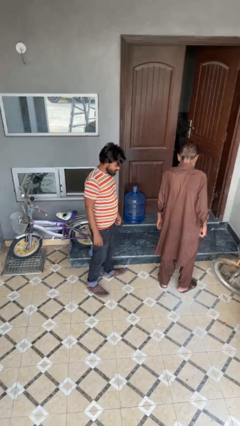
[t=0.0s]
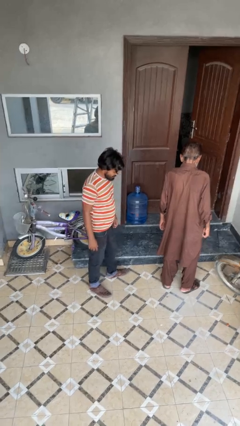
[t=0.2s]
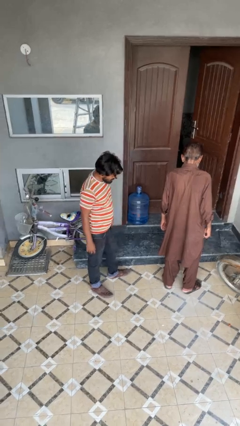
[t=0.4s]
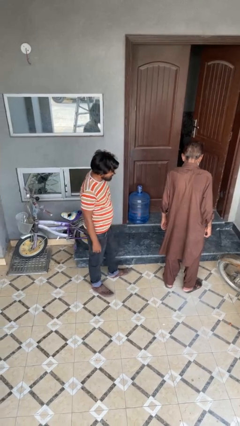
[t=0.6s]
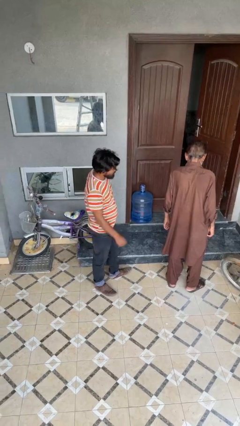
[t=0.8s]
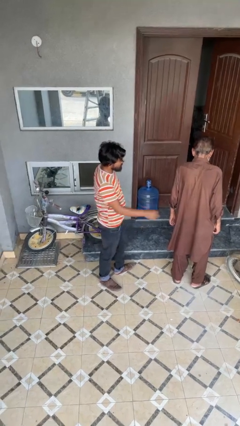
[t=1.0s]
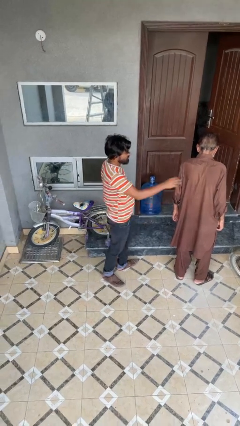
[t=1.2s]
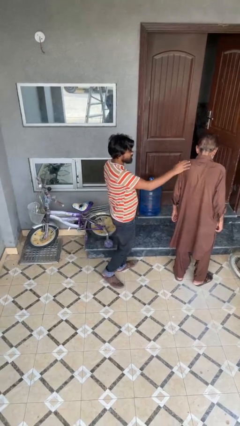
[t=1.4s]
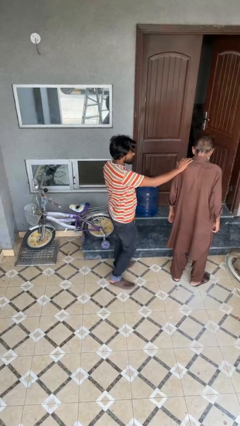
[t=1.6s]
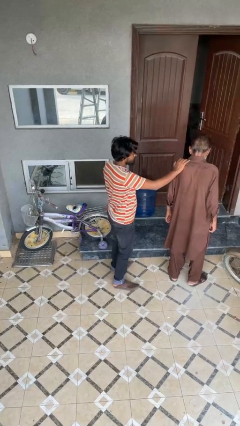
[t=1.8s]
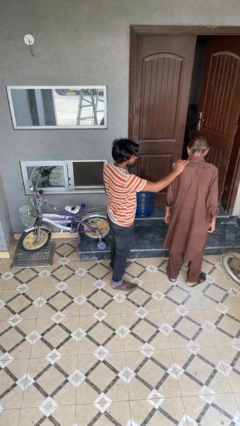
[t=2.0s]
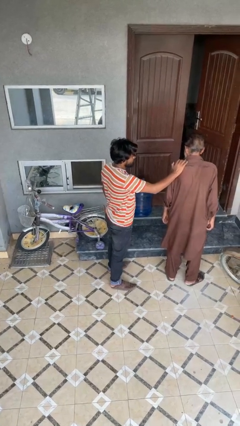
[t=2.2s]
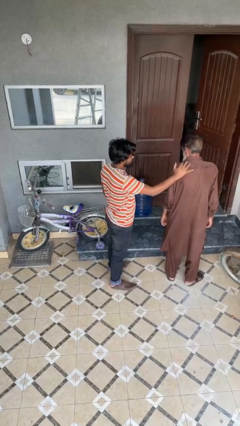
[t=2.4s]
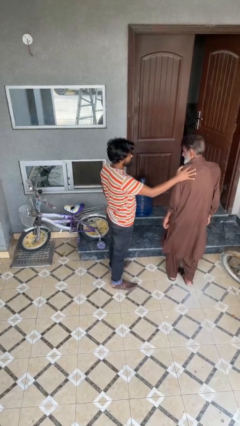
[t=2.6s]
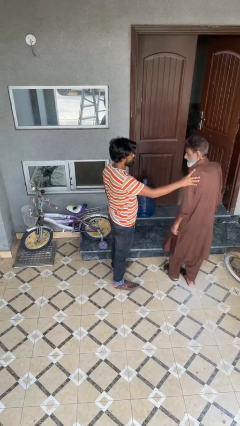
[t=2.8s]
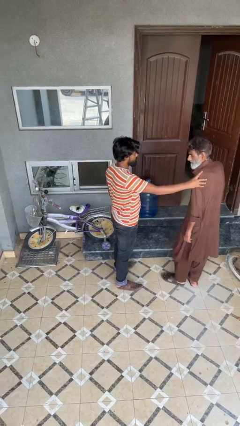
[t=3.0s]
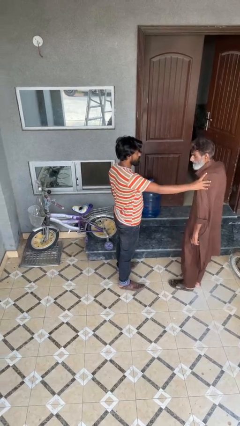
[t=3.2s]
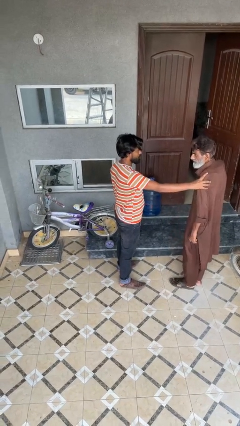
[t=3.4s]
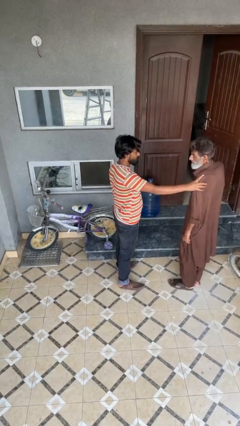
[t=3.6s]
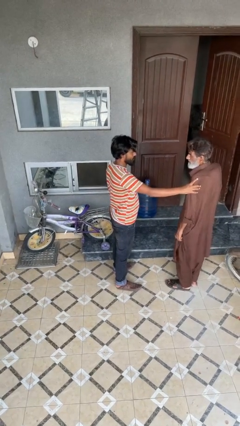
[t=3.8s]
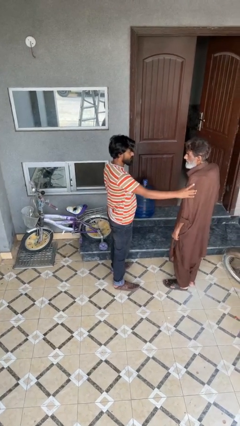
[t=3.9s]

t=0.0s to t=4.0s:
person touches back of person

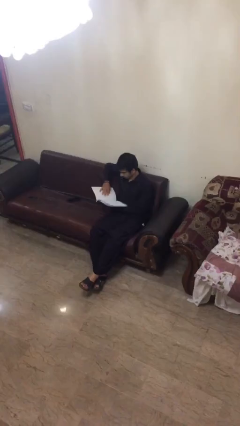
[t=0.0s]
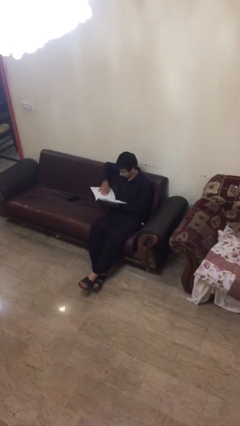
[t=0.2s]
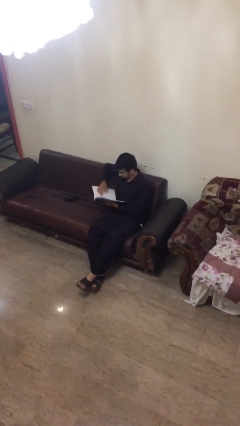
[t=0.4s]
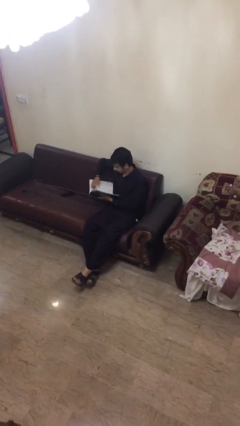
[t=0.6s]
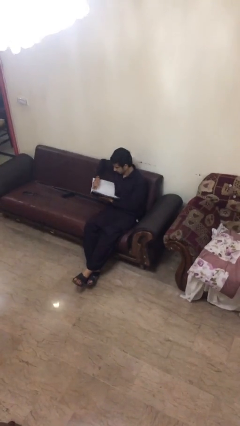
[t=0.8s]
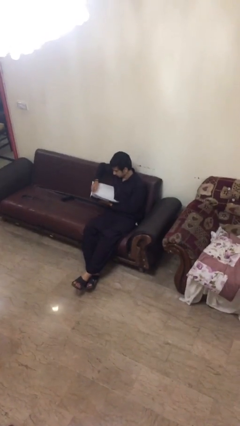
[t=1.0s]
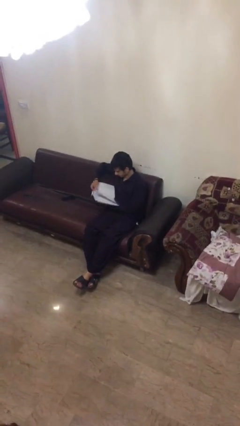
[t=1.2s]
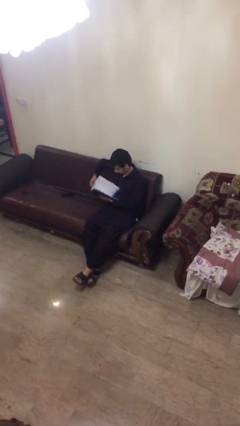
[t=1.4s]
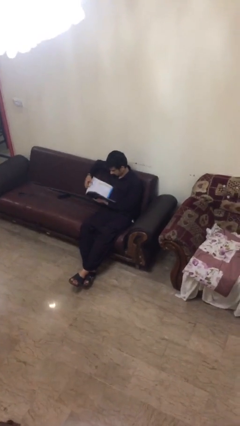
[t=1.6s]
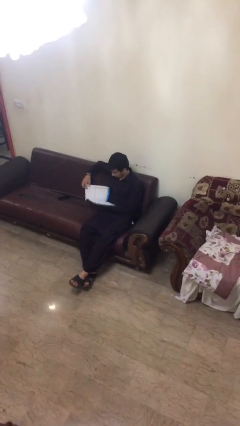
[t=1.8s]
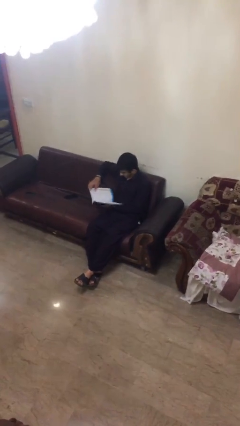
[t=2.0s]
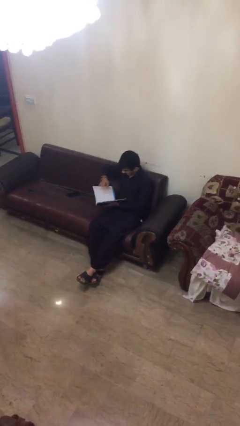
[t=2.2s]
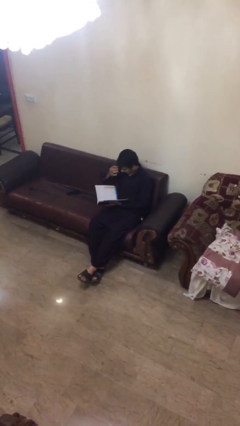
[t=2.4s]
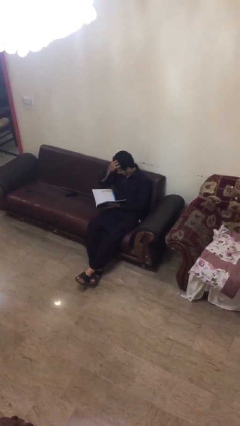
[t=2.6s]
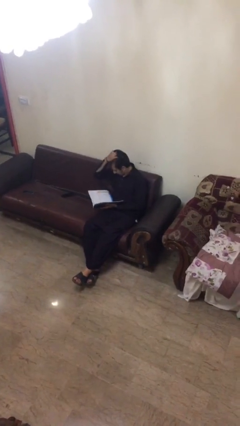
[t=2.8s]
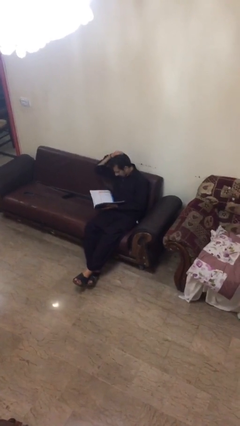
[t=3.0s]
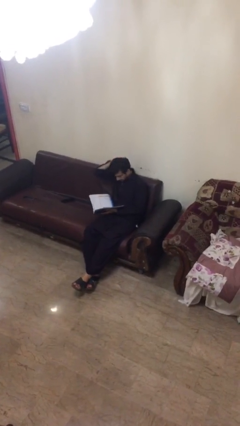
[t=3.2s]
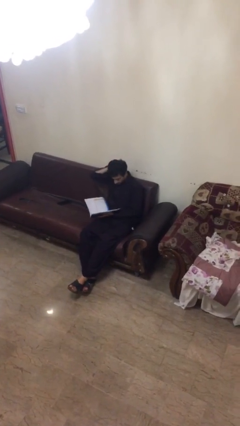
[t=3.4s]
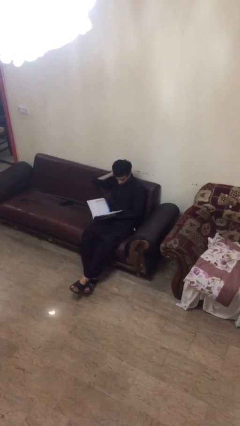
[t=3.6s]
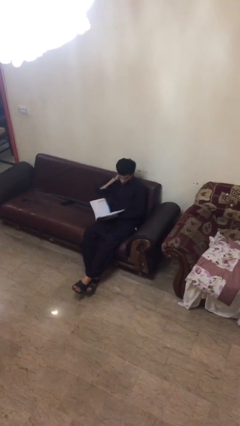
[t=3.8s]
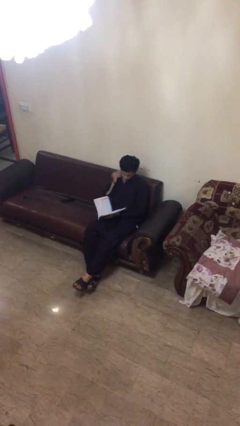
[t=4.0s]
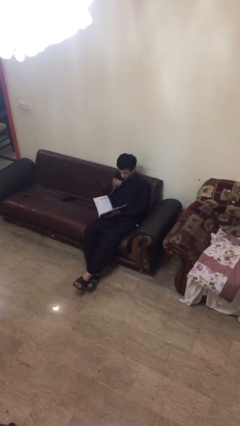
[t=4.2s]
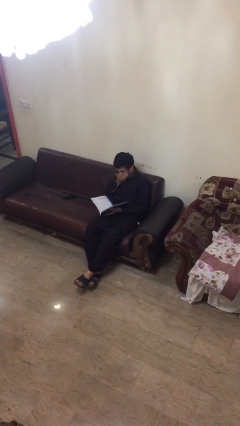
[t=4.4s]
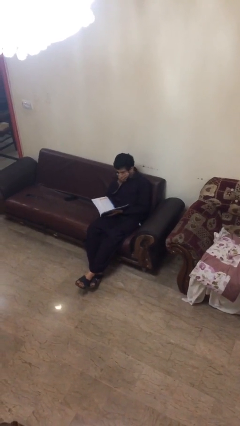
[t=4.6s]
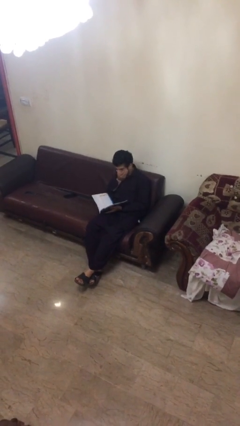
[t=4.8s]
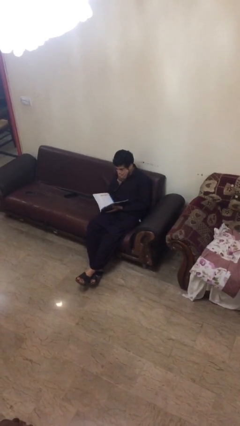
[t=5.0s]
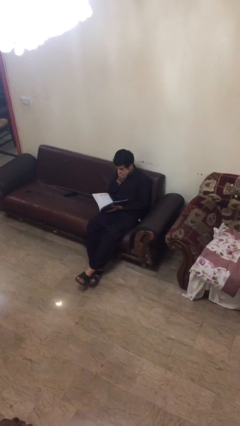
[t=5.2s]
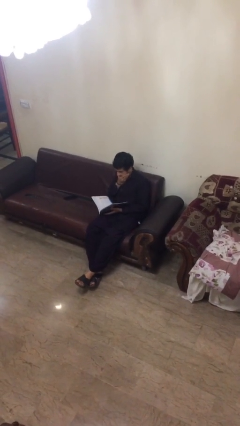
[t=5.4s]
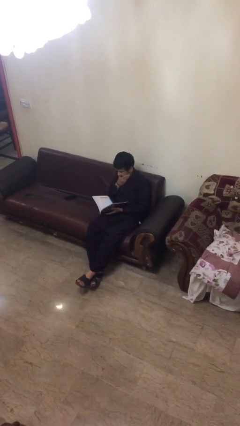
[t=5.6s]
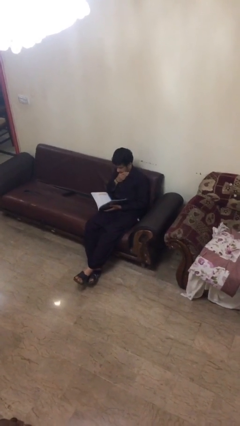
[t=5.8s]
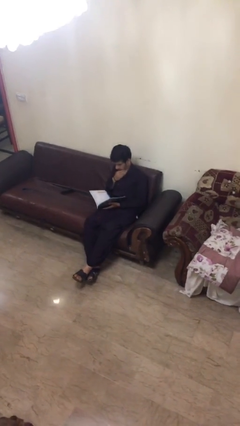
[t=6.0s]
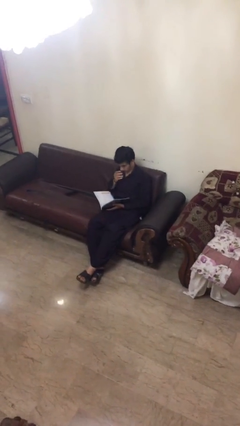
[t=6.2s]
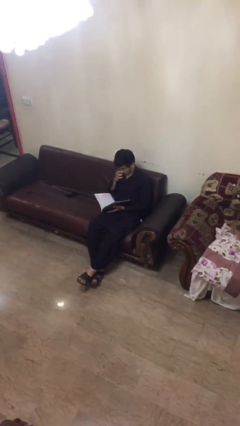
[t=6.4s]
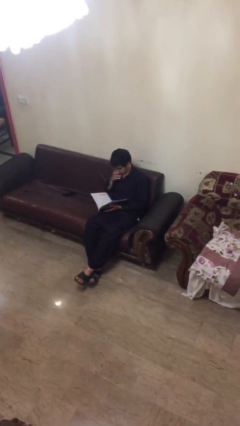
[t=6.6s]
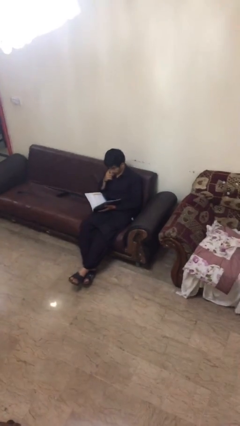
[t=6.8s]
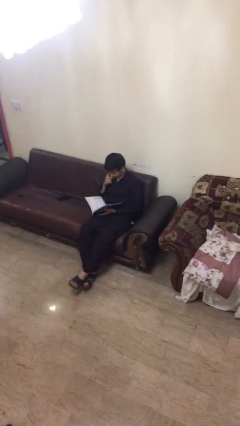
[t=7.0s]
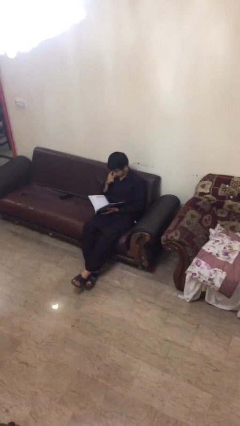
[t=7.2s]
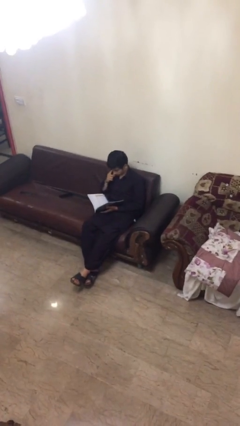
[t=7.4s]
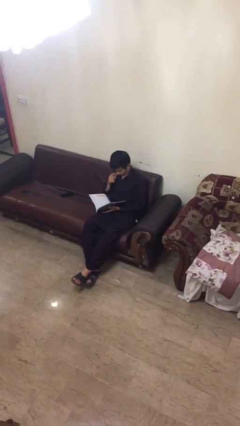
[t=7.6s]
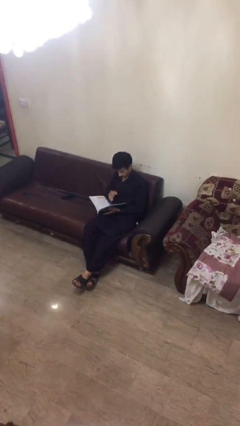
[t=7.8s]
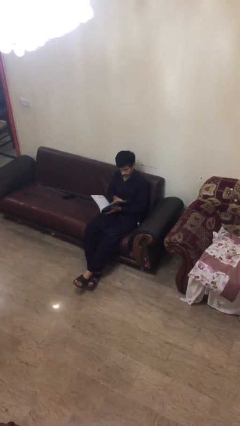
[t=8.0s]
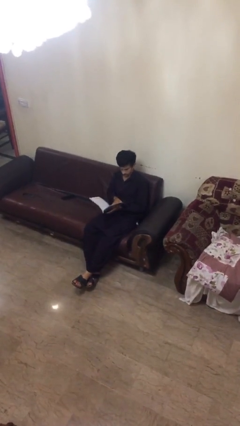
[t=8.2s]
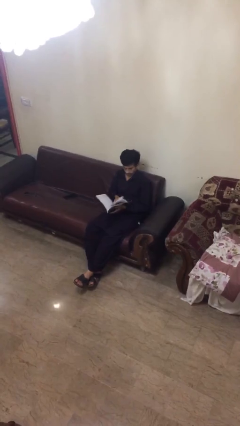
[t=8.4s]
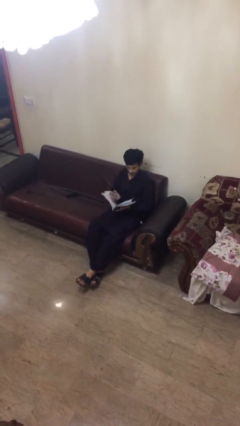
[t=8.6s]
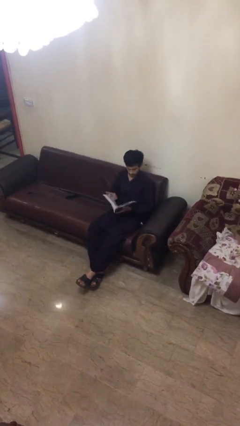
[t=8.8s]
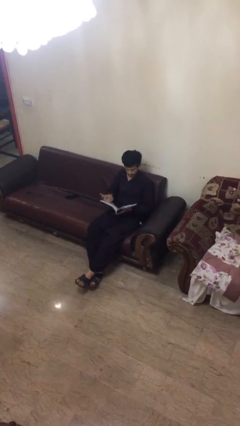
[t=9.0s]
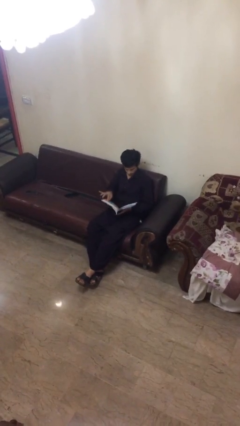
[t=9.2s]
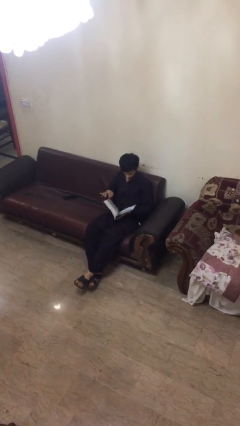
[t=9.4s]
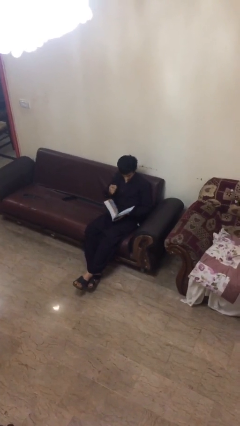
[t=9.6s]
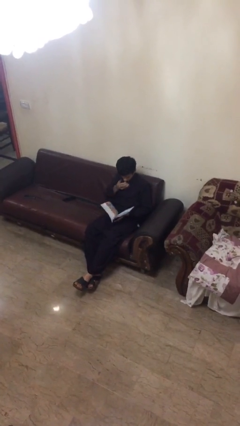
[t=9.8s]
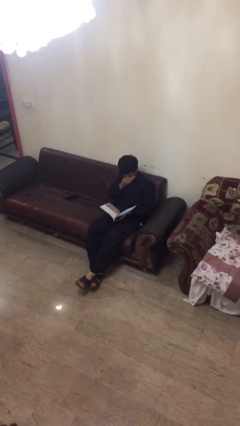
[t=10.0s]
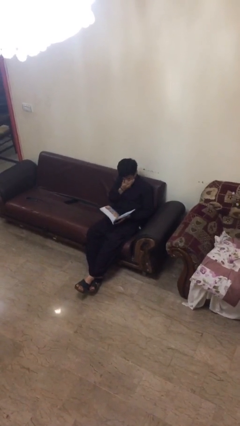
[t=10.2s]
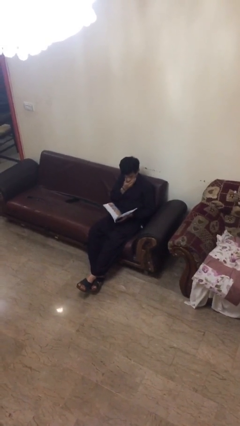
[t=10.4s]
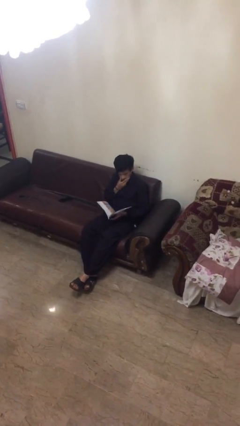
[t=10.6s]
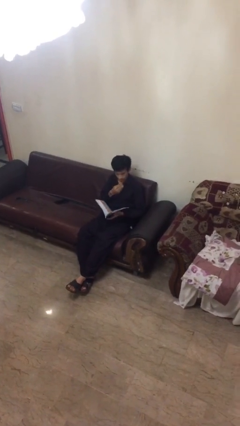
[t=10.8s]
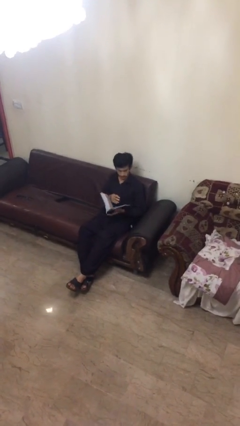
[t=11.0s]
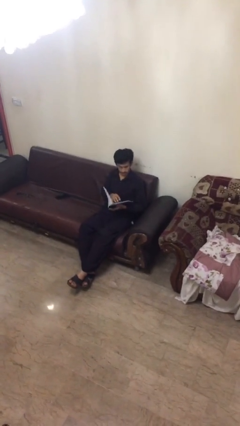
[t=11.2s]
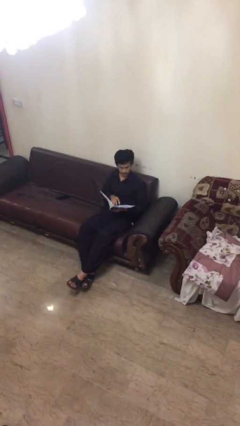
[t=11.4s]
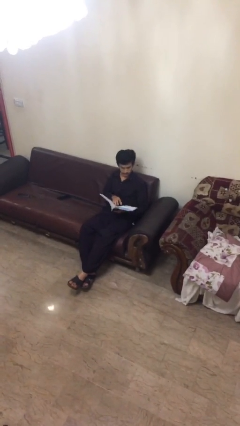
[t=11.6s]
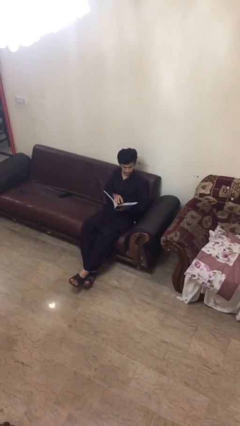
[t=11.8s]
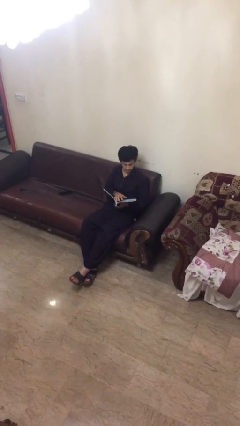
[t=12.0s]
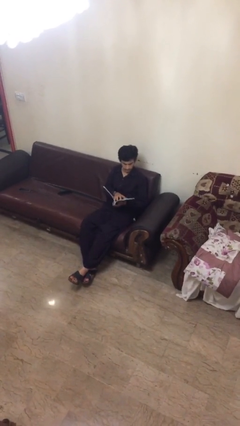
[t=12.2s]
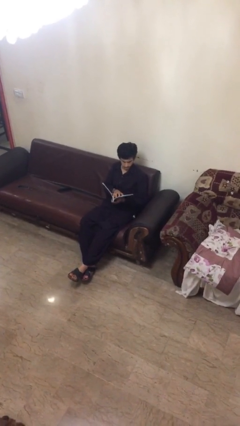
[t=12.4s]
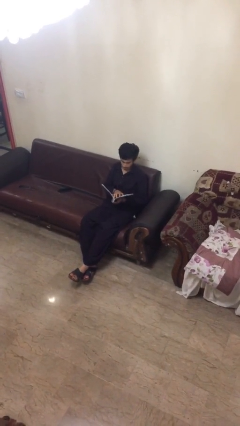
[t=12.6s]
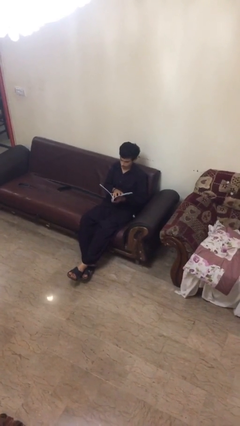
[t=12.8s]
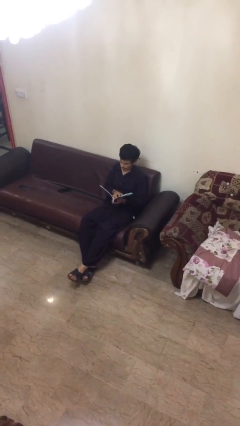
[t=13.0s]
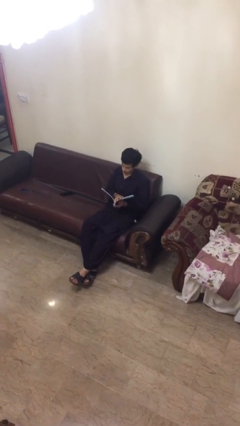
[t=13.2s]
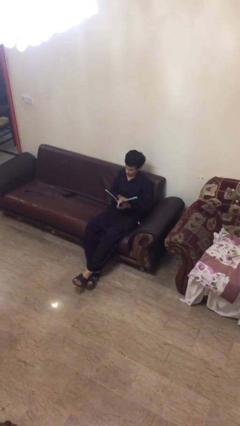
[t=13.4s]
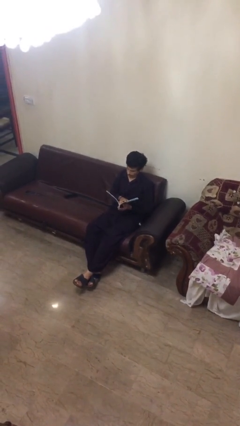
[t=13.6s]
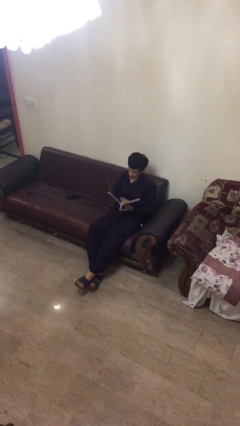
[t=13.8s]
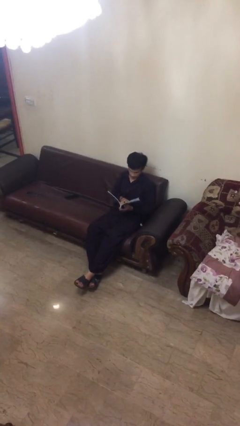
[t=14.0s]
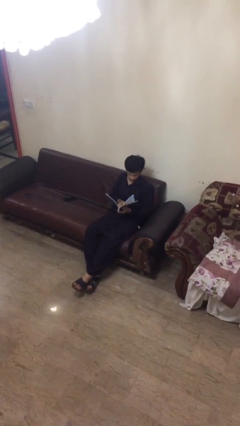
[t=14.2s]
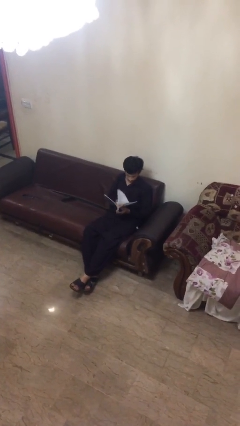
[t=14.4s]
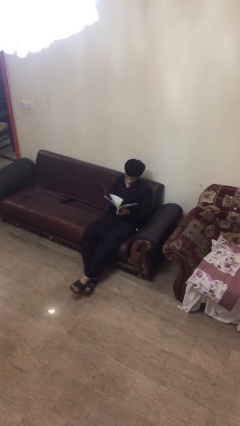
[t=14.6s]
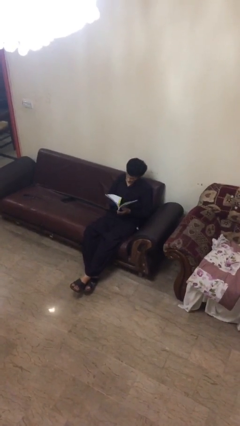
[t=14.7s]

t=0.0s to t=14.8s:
person reads document
